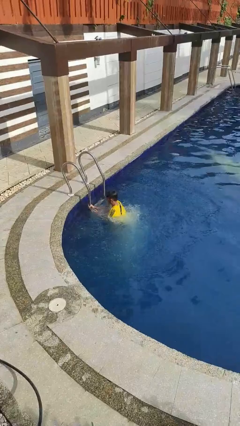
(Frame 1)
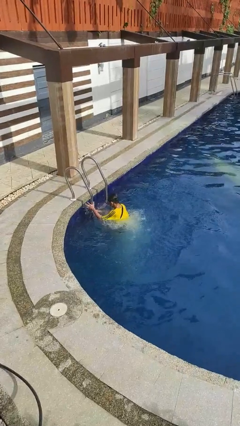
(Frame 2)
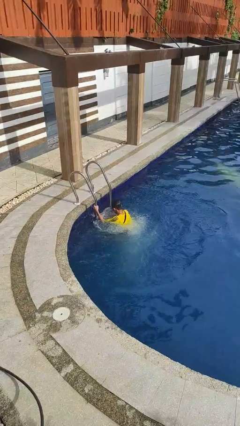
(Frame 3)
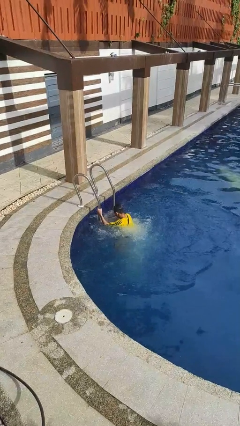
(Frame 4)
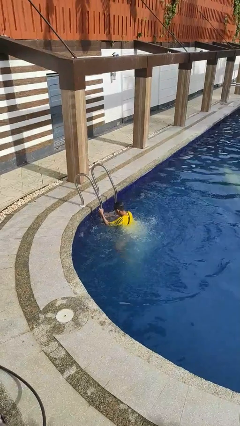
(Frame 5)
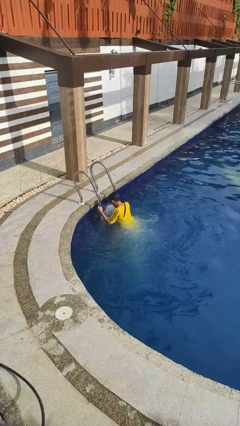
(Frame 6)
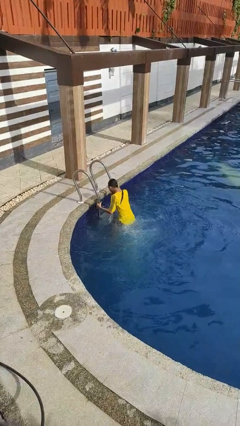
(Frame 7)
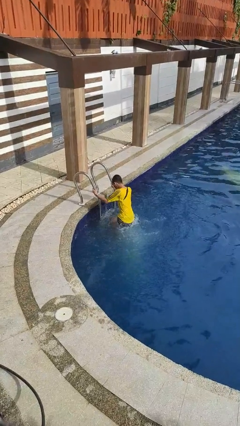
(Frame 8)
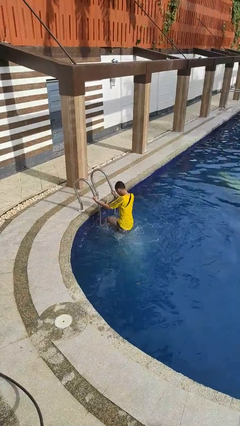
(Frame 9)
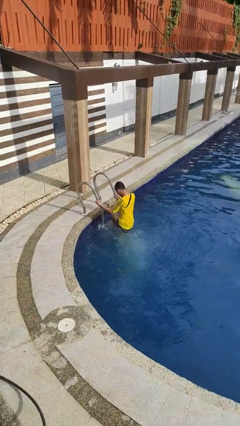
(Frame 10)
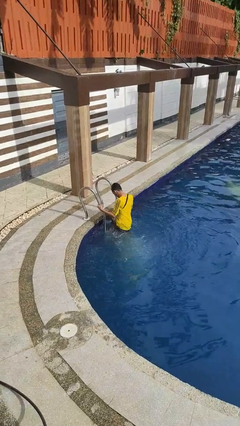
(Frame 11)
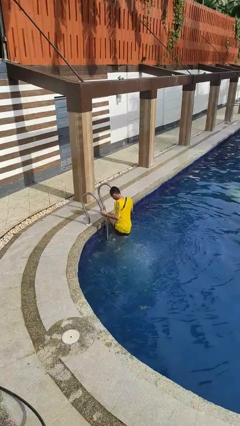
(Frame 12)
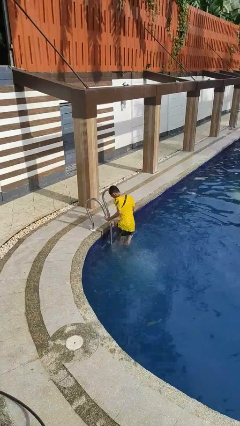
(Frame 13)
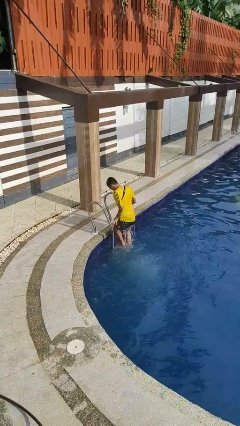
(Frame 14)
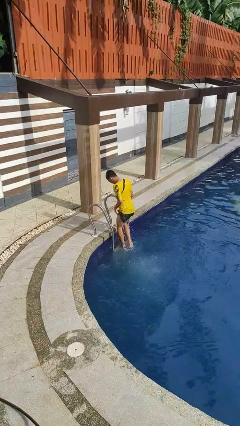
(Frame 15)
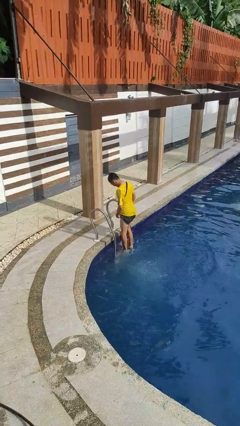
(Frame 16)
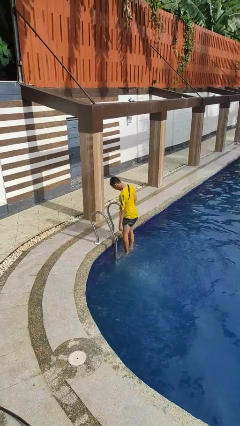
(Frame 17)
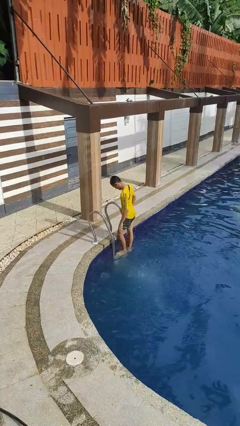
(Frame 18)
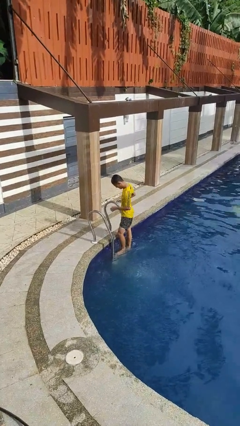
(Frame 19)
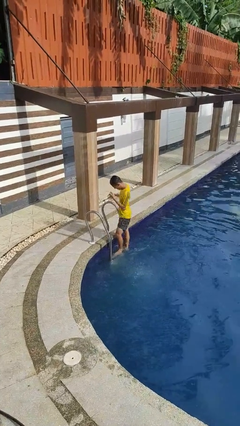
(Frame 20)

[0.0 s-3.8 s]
person exits pool

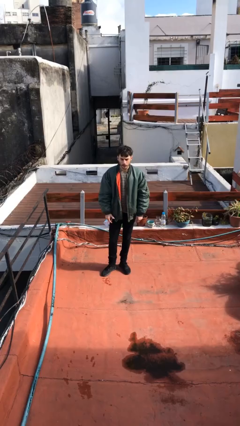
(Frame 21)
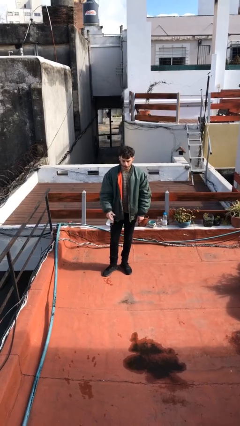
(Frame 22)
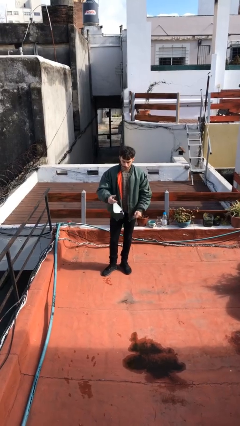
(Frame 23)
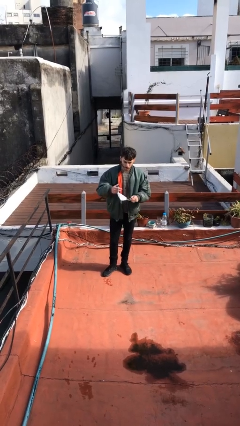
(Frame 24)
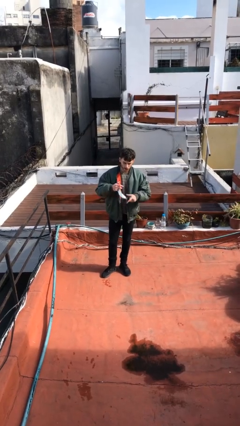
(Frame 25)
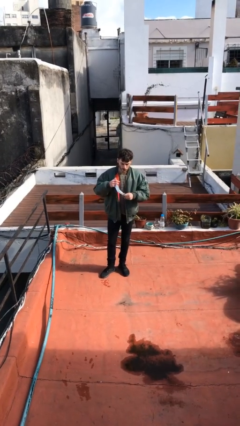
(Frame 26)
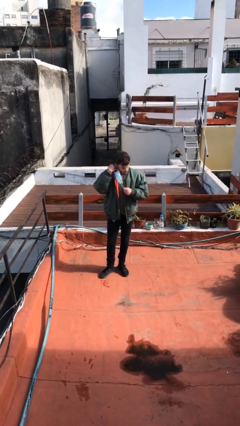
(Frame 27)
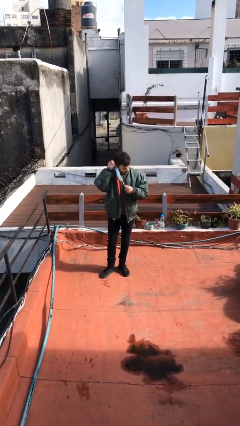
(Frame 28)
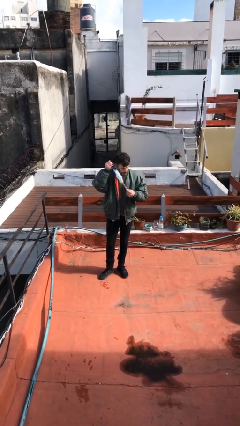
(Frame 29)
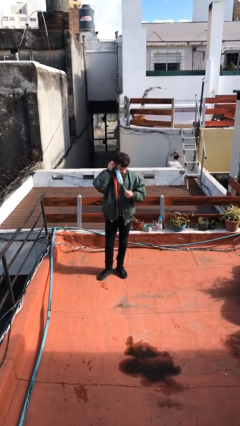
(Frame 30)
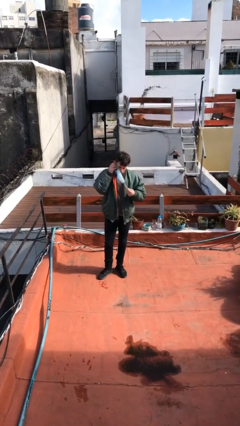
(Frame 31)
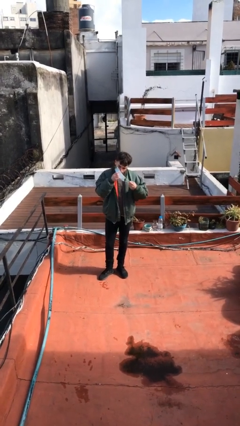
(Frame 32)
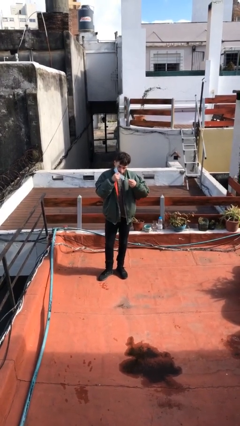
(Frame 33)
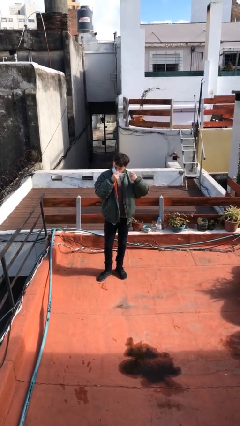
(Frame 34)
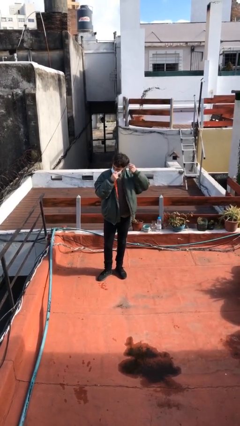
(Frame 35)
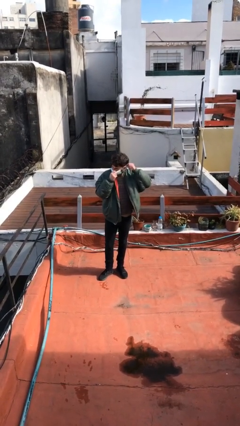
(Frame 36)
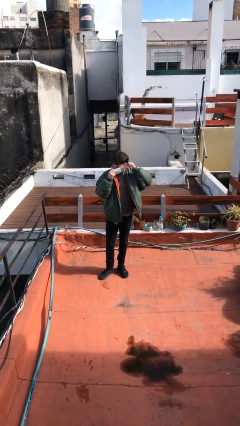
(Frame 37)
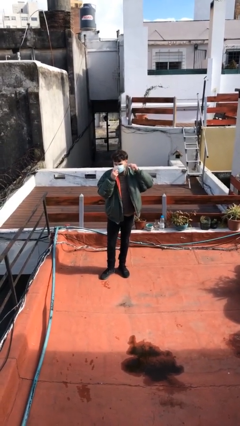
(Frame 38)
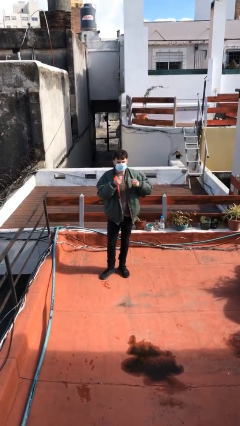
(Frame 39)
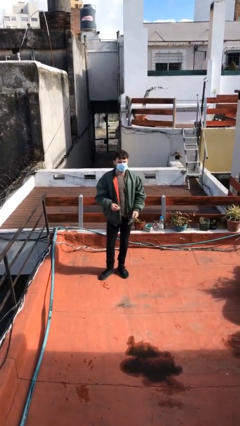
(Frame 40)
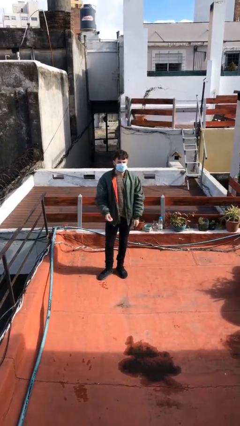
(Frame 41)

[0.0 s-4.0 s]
person puts on facemask

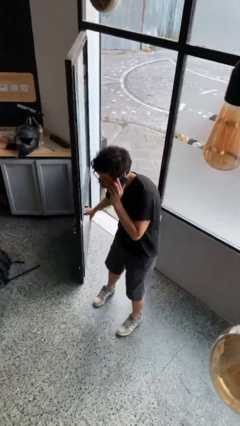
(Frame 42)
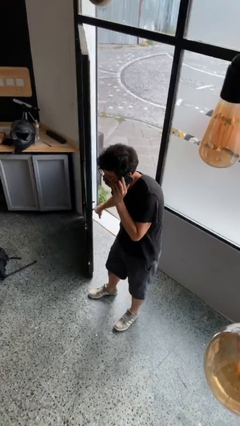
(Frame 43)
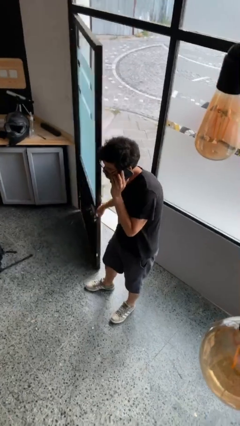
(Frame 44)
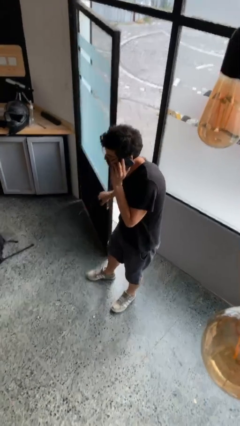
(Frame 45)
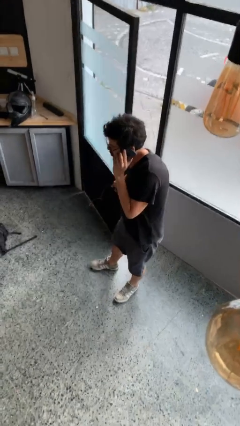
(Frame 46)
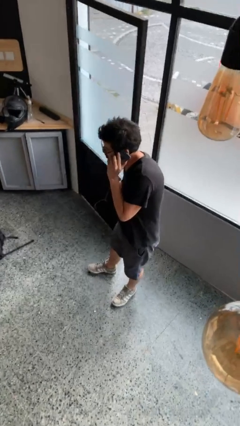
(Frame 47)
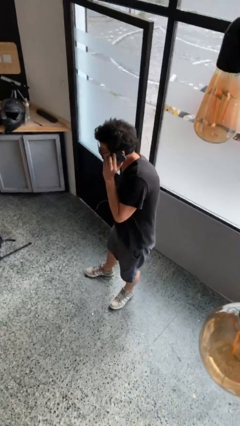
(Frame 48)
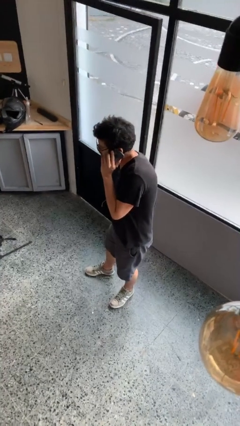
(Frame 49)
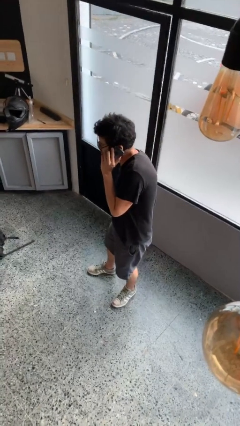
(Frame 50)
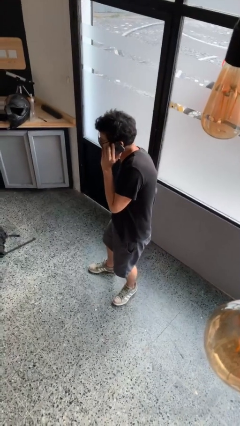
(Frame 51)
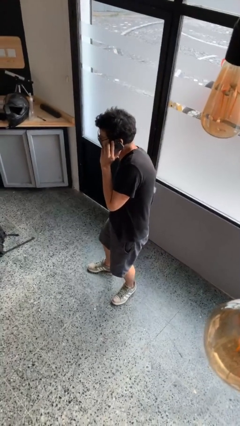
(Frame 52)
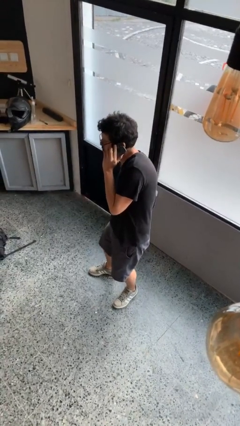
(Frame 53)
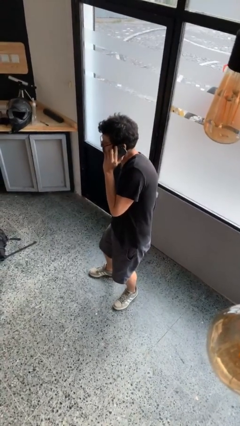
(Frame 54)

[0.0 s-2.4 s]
person closes facility door

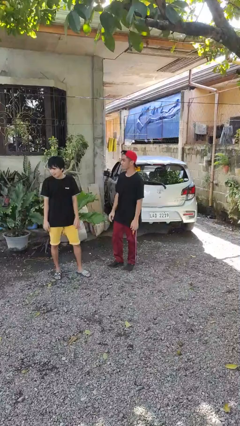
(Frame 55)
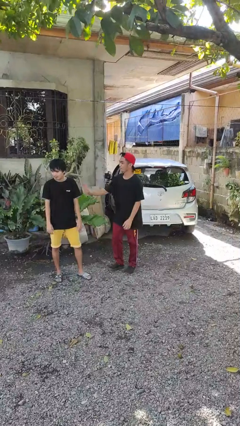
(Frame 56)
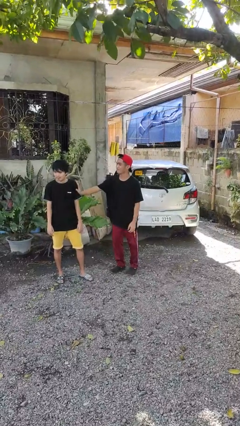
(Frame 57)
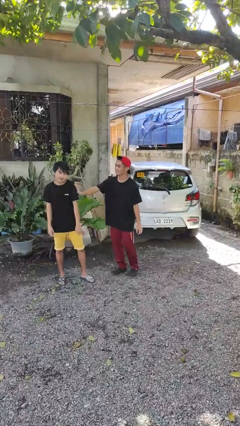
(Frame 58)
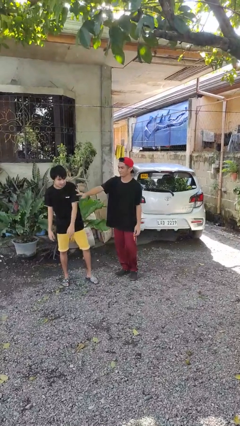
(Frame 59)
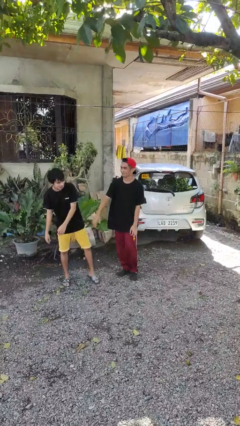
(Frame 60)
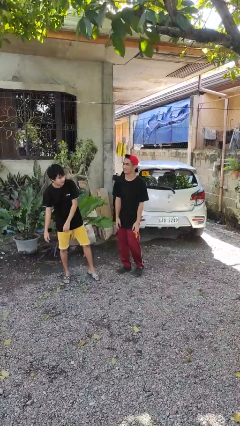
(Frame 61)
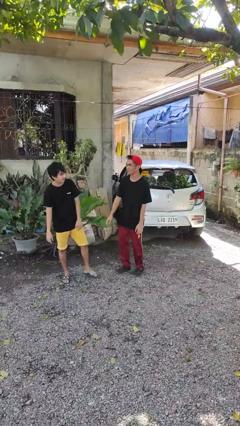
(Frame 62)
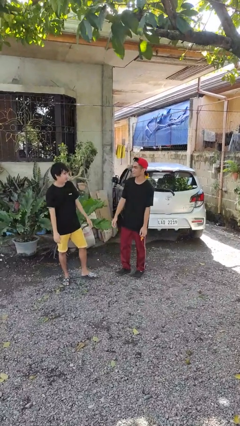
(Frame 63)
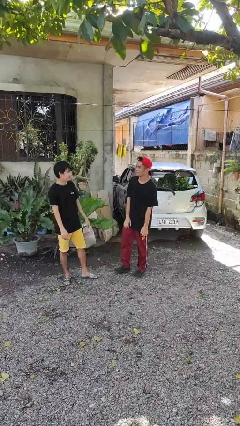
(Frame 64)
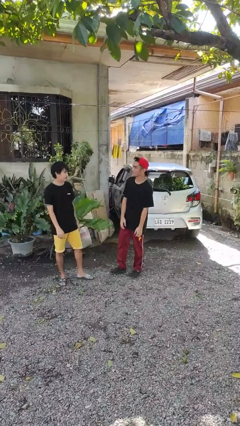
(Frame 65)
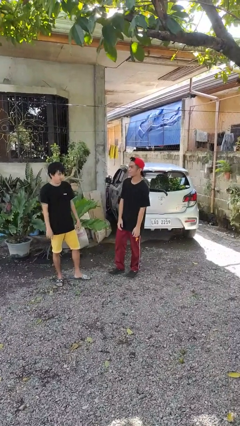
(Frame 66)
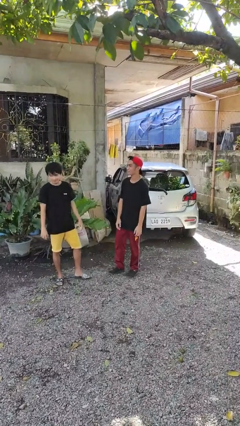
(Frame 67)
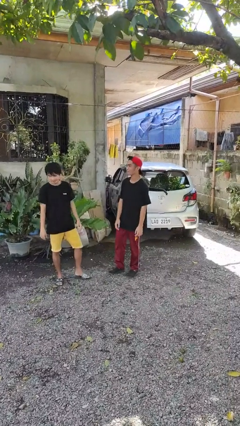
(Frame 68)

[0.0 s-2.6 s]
person shoves person

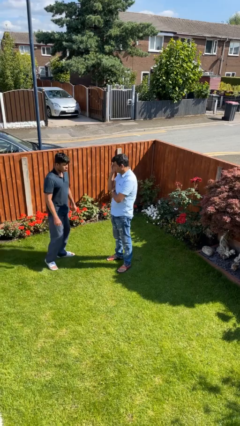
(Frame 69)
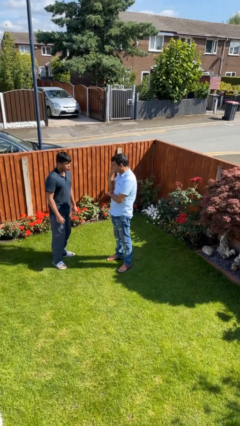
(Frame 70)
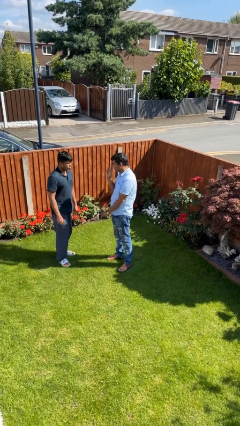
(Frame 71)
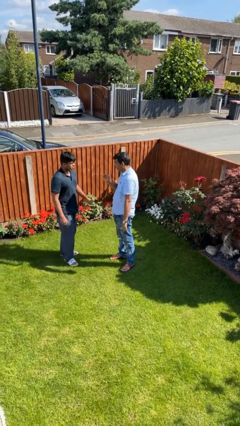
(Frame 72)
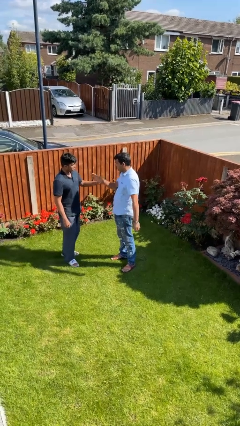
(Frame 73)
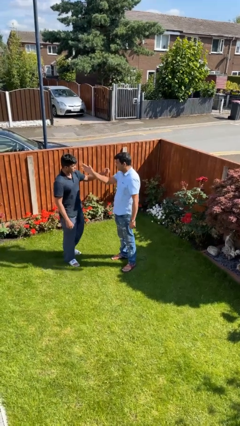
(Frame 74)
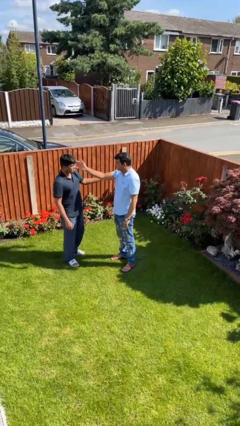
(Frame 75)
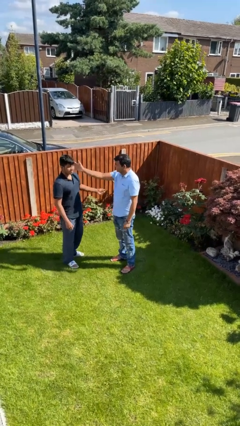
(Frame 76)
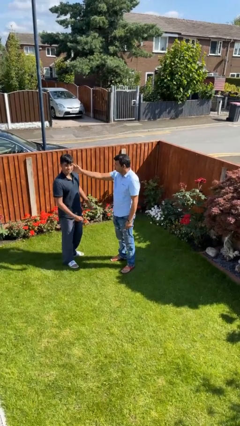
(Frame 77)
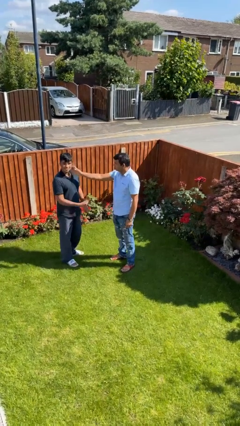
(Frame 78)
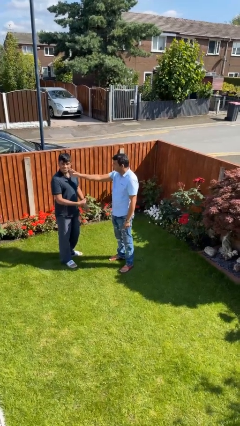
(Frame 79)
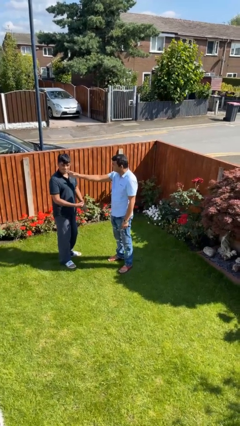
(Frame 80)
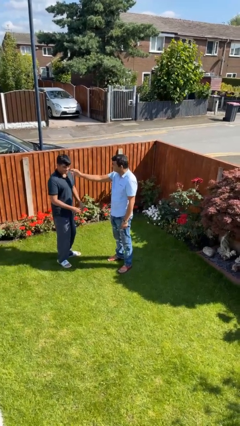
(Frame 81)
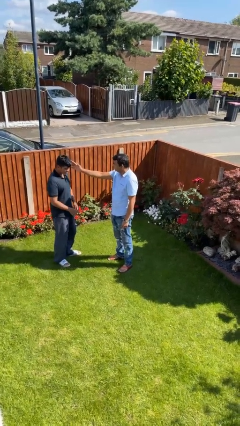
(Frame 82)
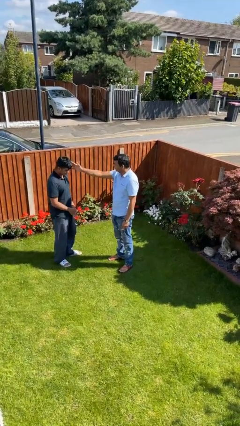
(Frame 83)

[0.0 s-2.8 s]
person touches face of person

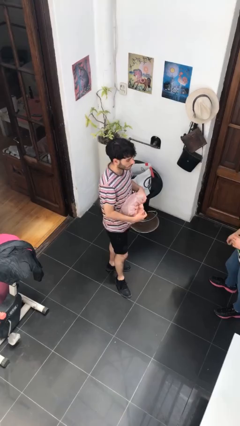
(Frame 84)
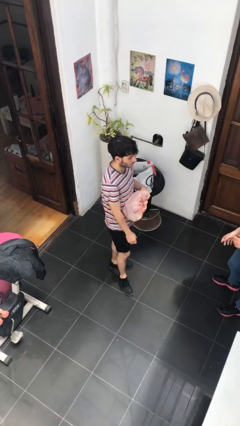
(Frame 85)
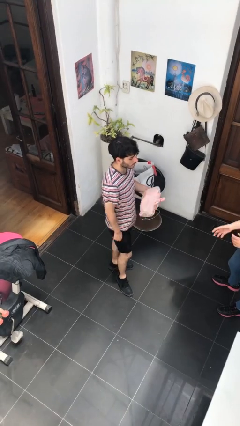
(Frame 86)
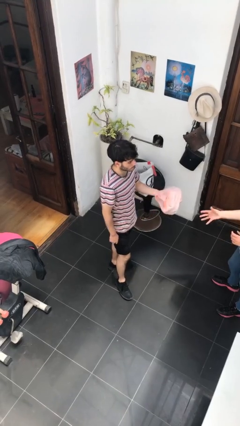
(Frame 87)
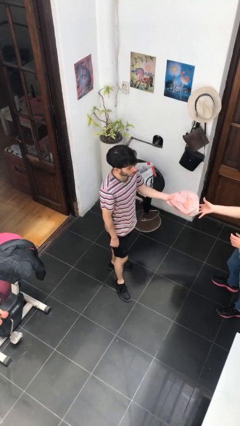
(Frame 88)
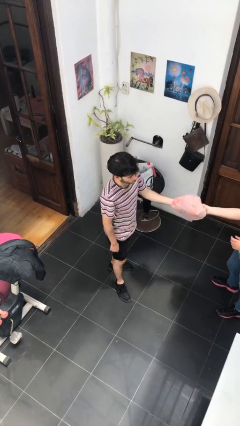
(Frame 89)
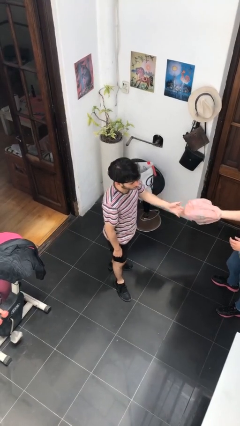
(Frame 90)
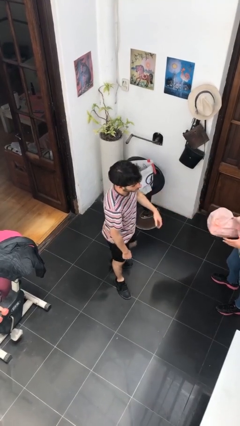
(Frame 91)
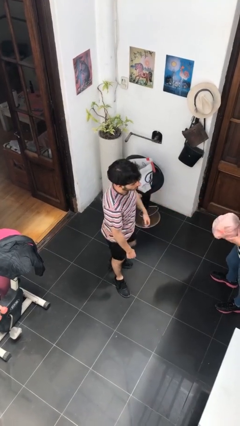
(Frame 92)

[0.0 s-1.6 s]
person transfers object to person

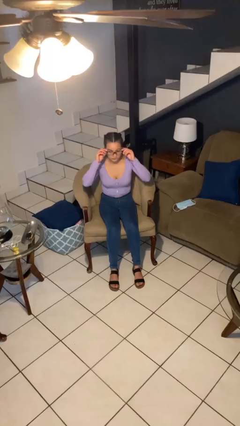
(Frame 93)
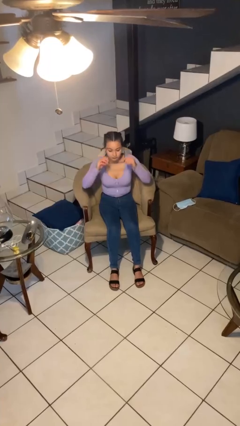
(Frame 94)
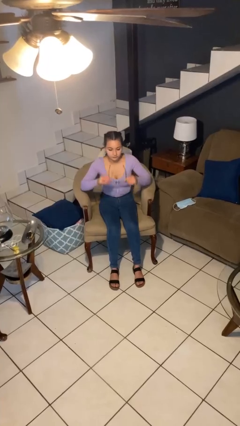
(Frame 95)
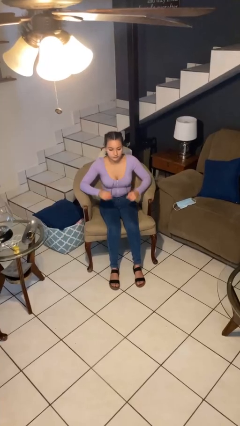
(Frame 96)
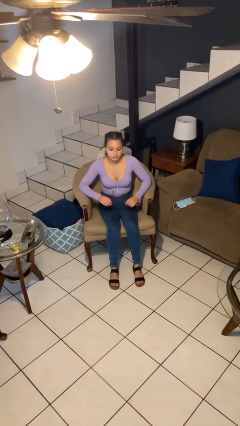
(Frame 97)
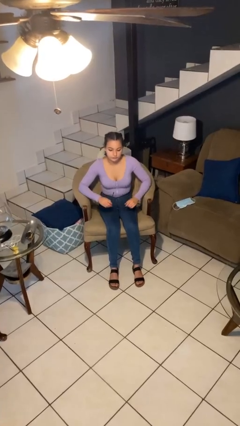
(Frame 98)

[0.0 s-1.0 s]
person takes off glasses
